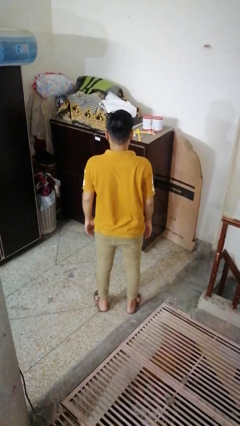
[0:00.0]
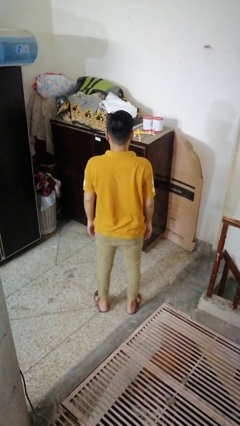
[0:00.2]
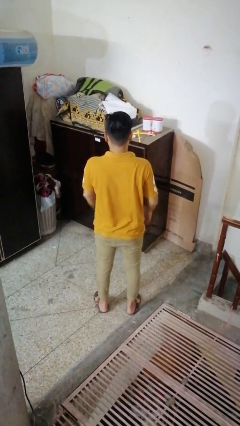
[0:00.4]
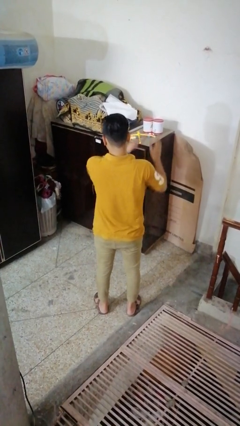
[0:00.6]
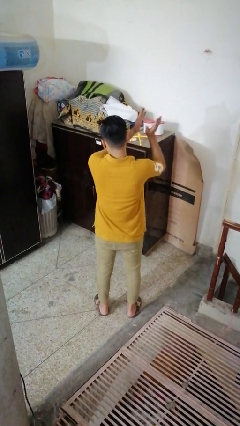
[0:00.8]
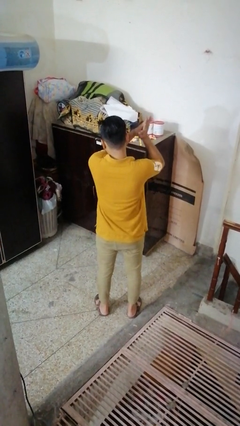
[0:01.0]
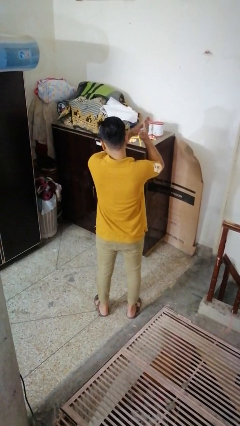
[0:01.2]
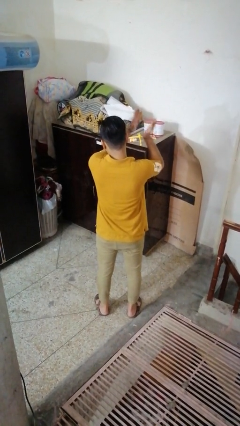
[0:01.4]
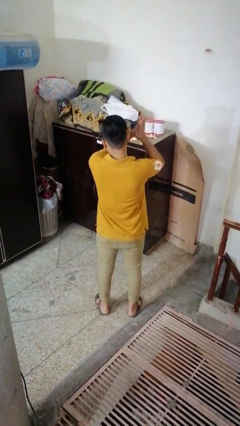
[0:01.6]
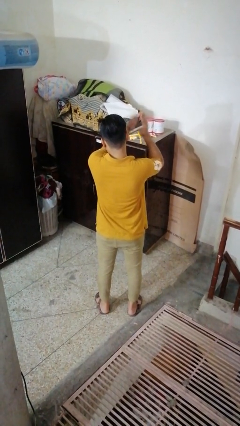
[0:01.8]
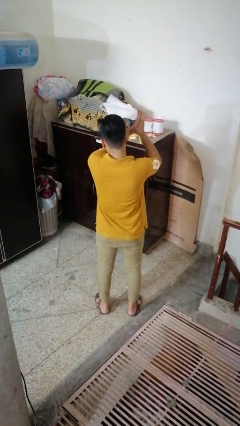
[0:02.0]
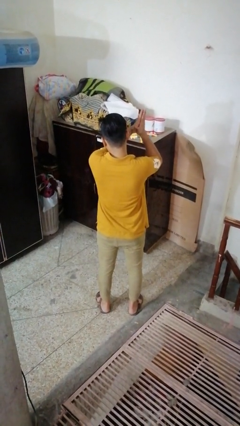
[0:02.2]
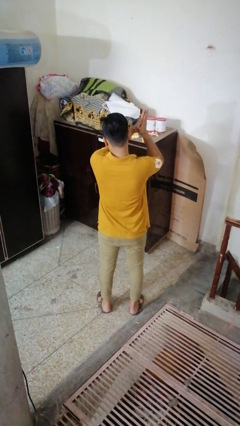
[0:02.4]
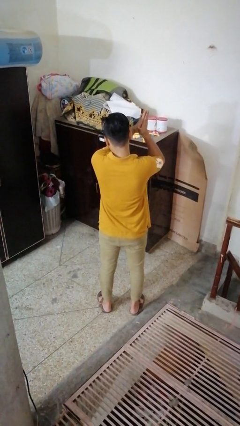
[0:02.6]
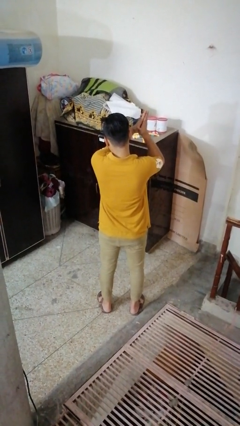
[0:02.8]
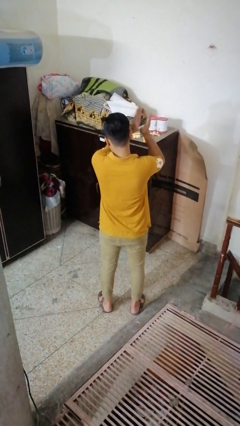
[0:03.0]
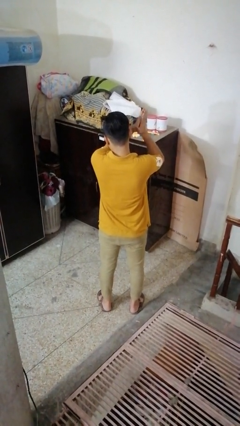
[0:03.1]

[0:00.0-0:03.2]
person claps hands

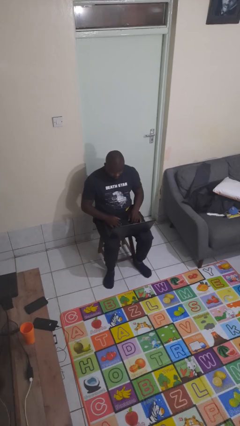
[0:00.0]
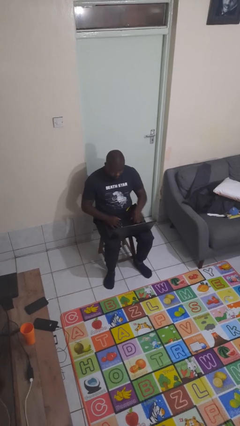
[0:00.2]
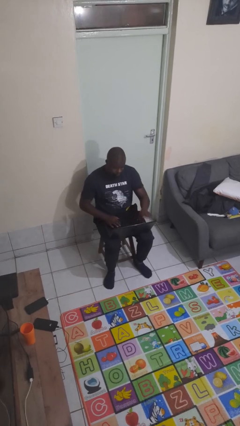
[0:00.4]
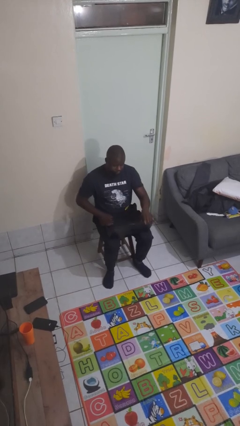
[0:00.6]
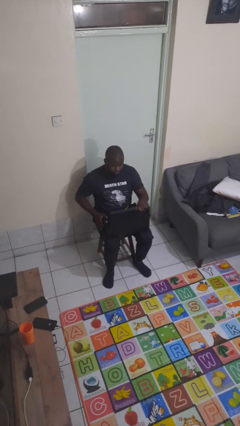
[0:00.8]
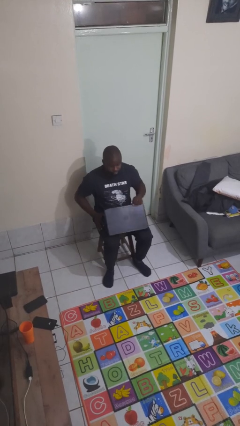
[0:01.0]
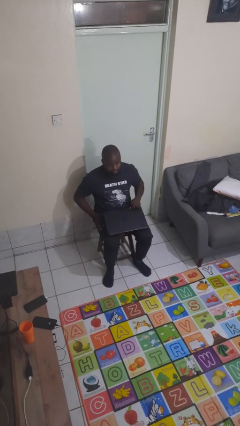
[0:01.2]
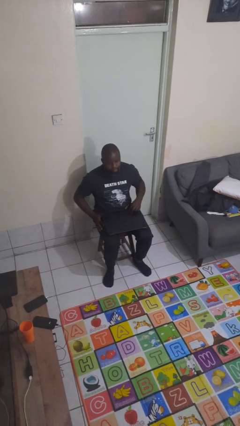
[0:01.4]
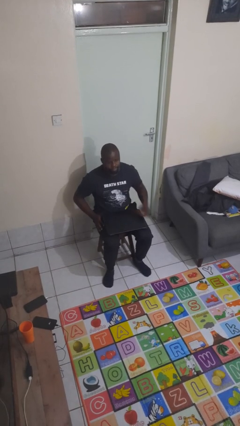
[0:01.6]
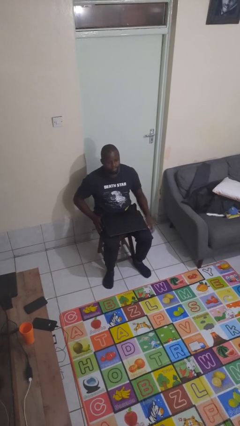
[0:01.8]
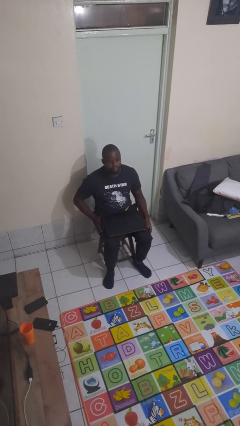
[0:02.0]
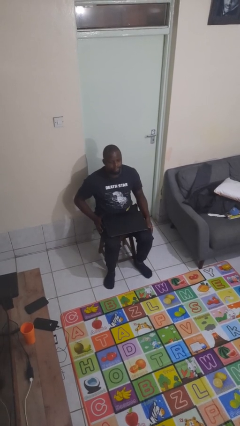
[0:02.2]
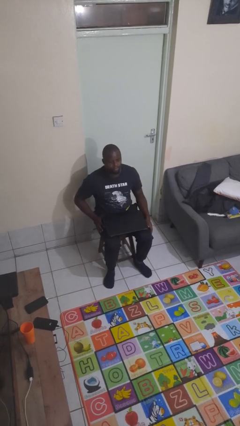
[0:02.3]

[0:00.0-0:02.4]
person closes laptop

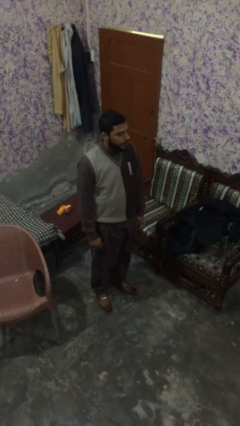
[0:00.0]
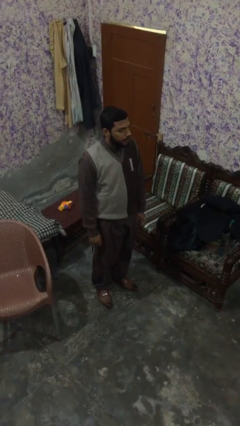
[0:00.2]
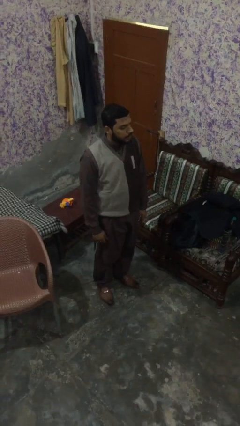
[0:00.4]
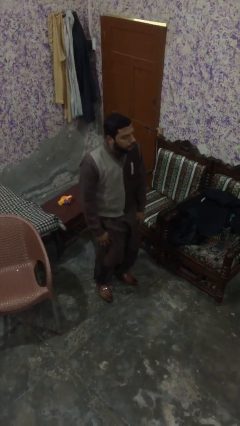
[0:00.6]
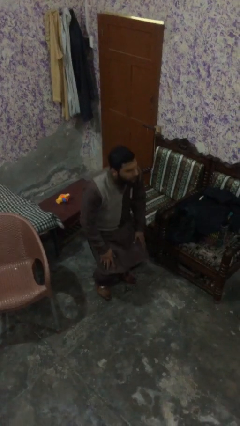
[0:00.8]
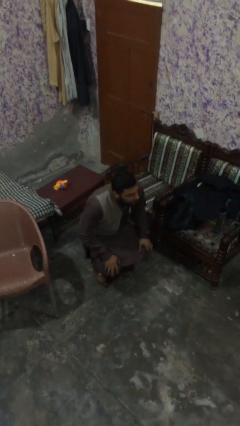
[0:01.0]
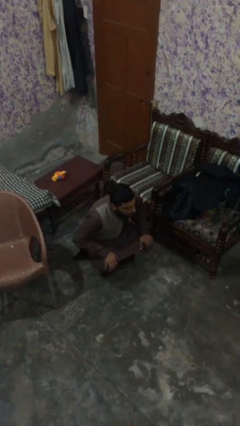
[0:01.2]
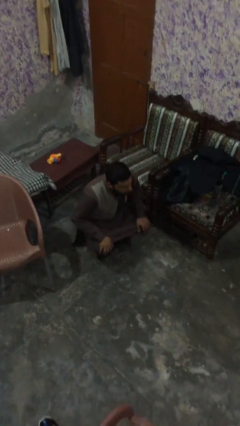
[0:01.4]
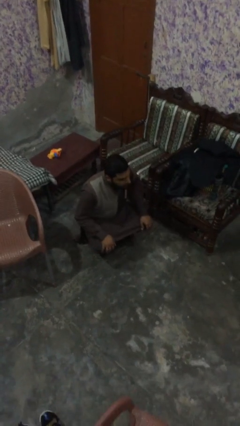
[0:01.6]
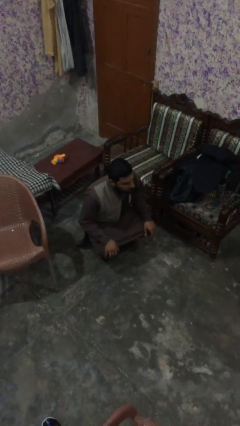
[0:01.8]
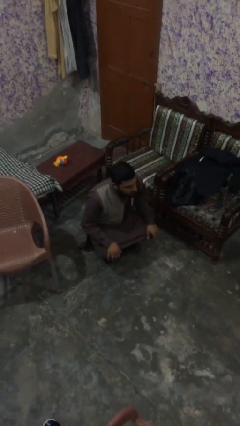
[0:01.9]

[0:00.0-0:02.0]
person sits down

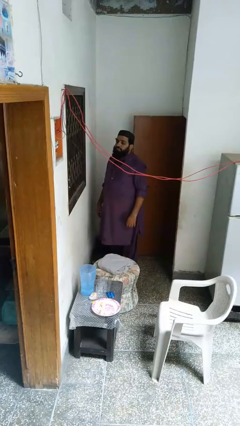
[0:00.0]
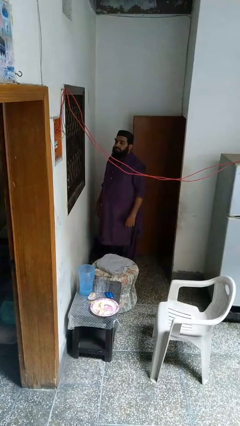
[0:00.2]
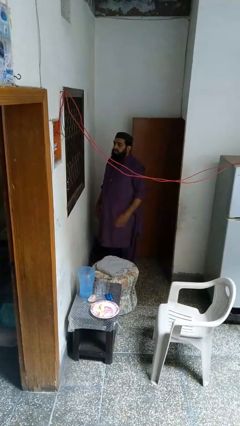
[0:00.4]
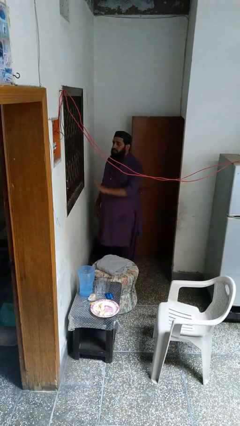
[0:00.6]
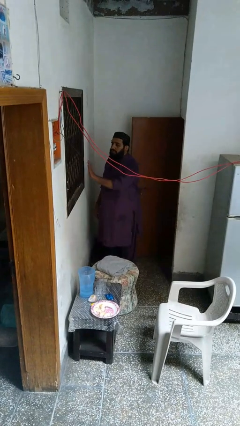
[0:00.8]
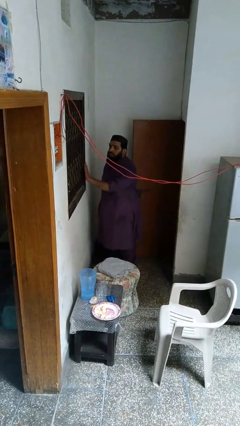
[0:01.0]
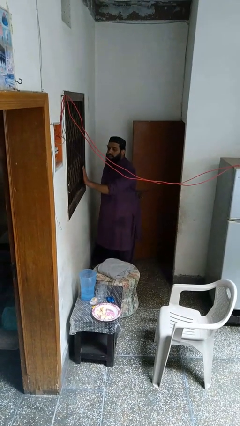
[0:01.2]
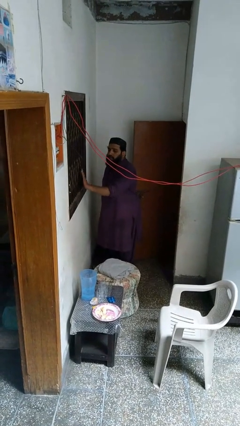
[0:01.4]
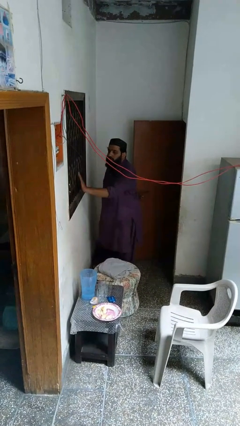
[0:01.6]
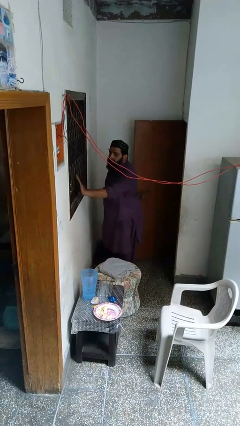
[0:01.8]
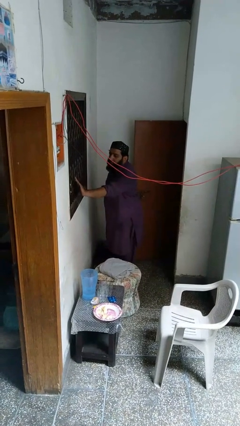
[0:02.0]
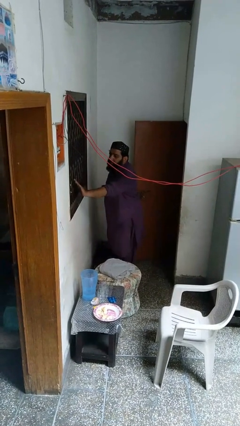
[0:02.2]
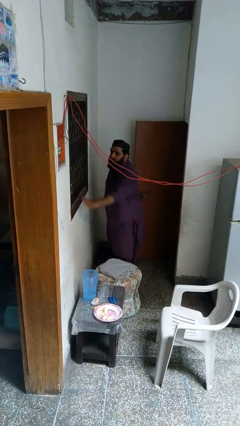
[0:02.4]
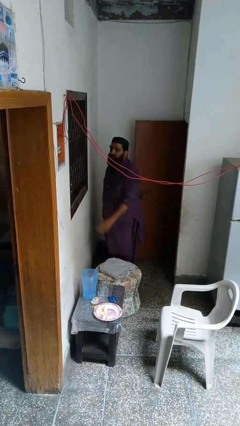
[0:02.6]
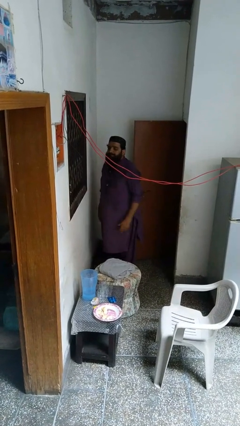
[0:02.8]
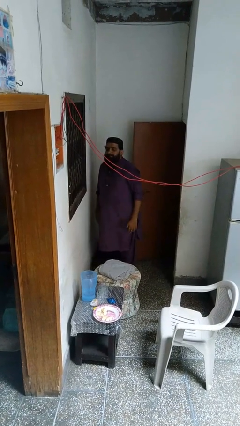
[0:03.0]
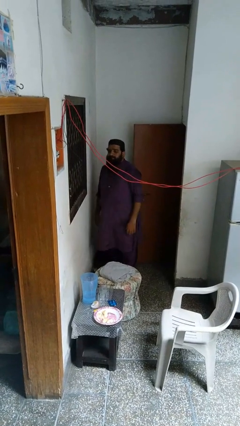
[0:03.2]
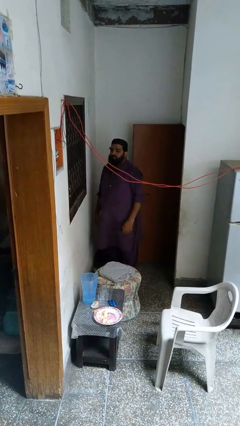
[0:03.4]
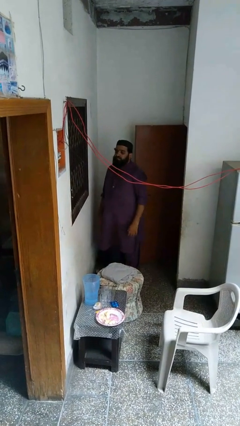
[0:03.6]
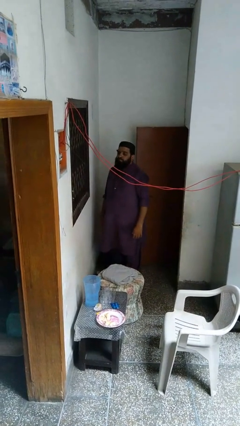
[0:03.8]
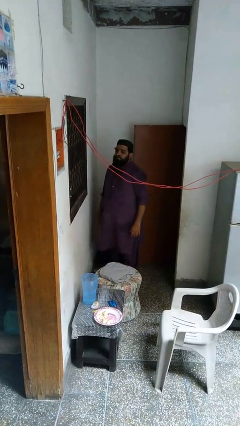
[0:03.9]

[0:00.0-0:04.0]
person opens home window

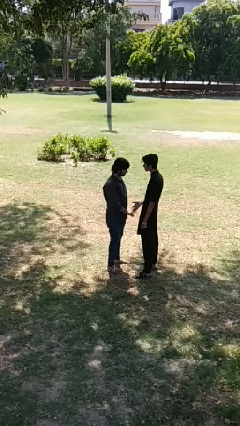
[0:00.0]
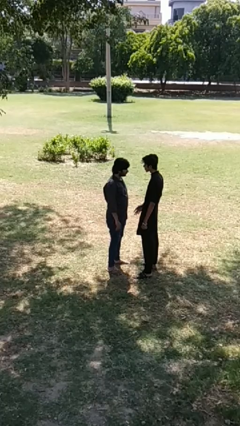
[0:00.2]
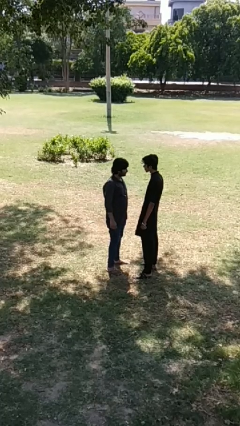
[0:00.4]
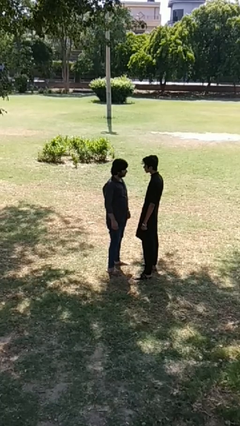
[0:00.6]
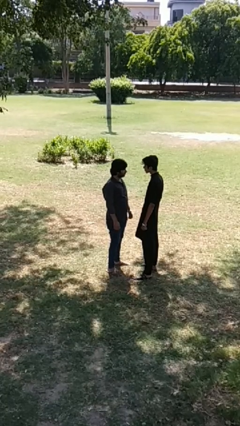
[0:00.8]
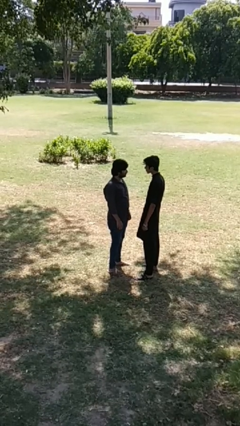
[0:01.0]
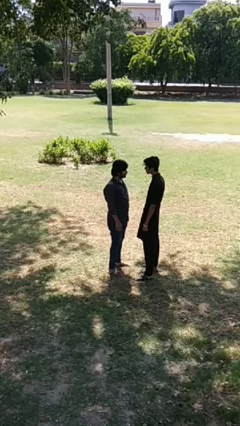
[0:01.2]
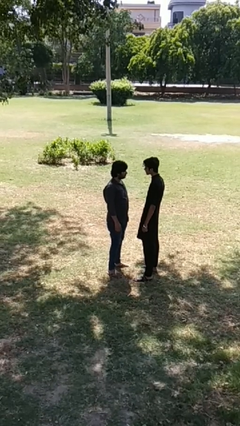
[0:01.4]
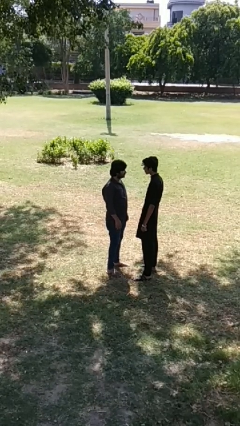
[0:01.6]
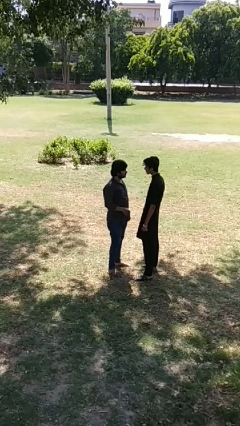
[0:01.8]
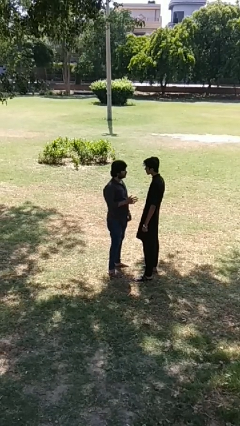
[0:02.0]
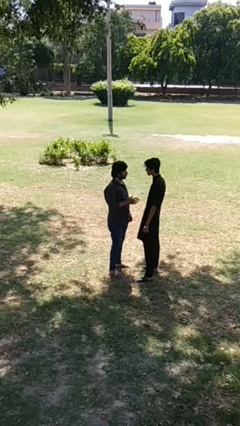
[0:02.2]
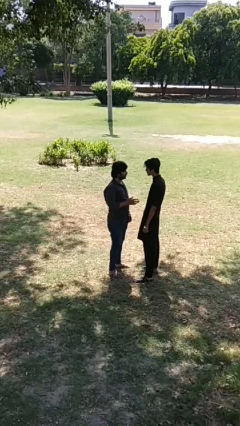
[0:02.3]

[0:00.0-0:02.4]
person highfives hand

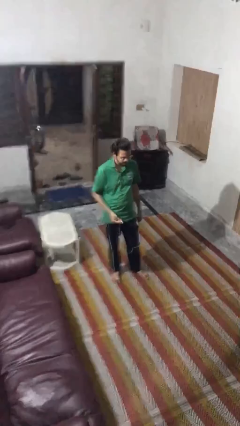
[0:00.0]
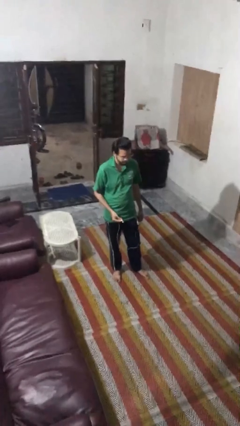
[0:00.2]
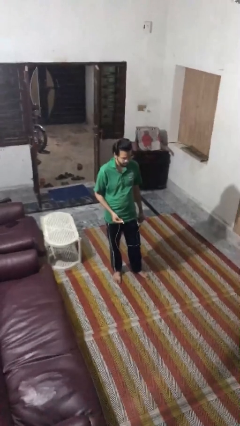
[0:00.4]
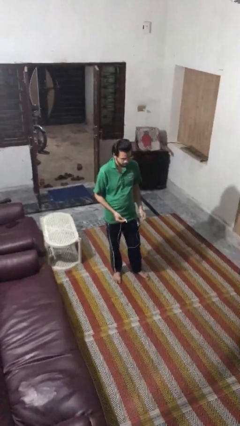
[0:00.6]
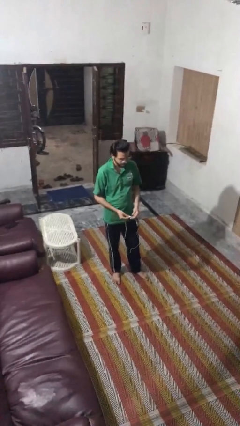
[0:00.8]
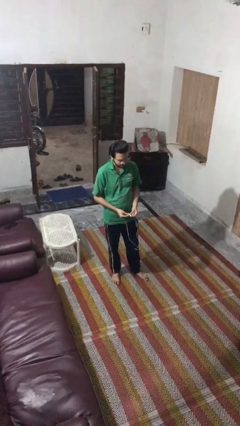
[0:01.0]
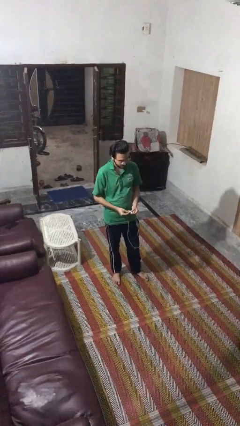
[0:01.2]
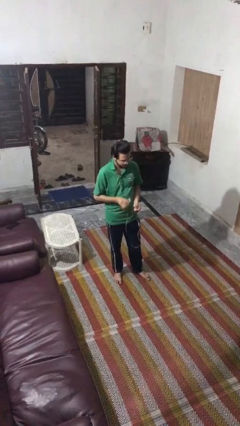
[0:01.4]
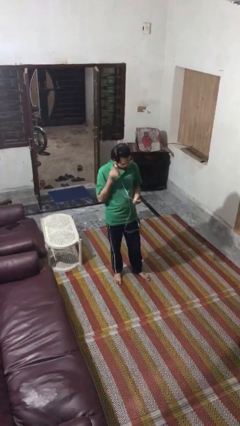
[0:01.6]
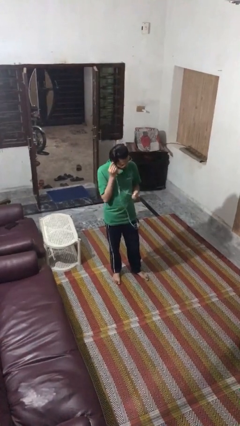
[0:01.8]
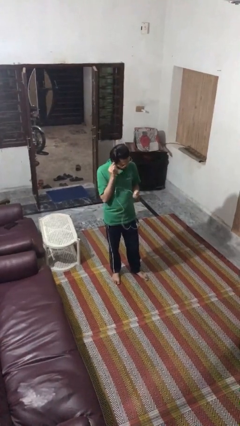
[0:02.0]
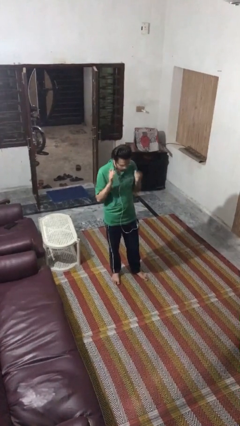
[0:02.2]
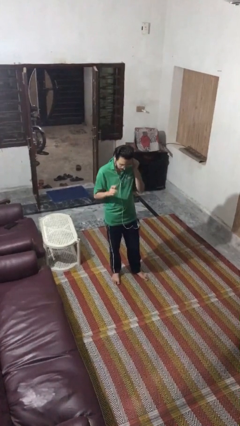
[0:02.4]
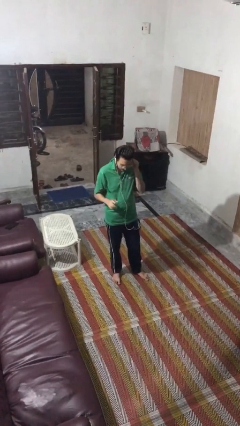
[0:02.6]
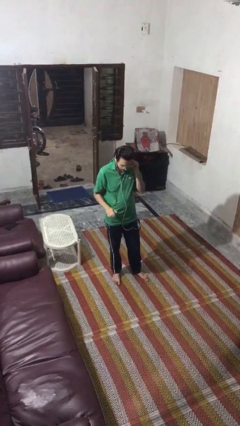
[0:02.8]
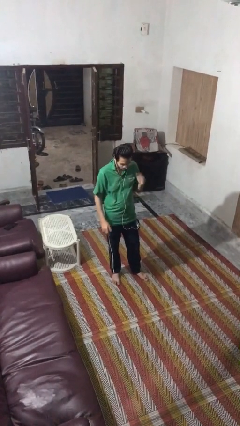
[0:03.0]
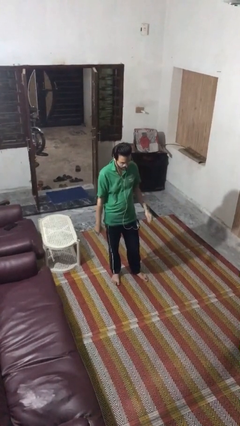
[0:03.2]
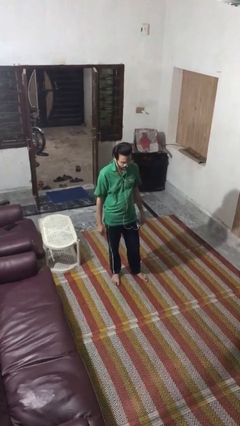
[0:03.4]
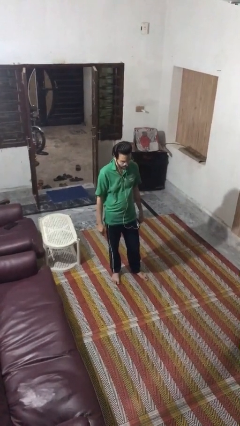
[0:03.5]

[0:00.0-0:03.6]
person puts on headphones
